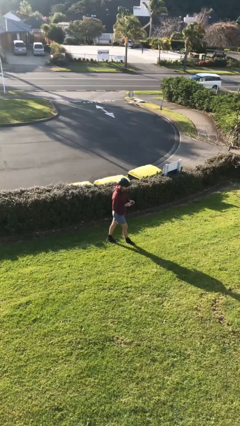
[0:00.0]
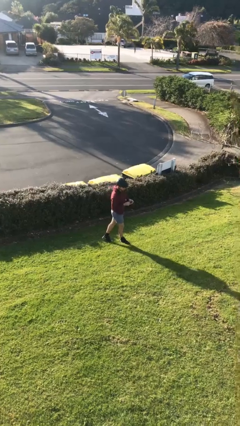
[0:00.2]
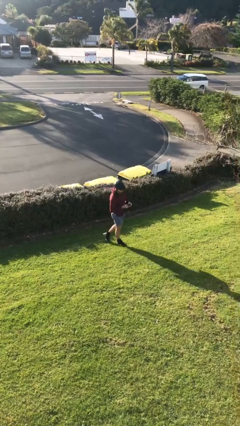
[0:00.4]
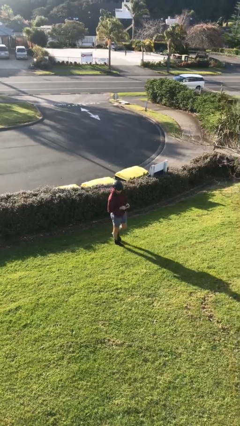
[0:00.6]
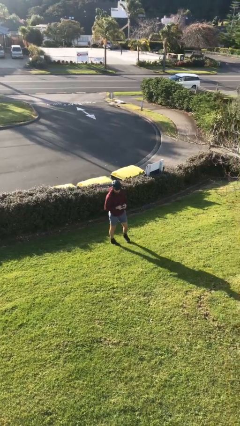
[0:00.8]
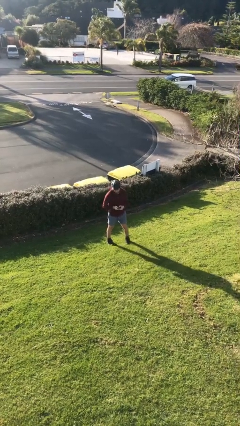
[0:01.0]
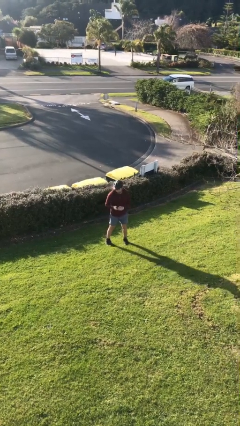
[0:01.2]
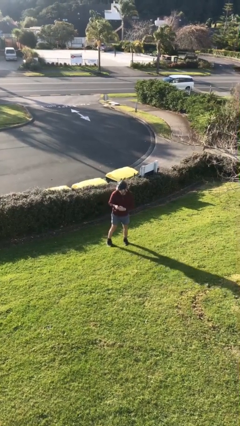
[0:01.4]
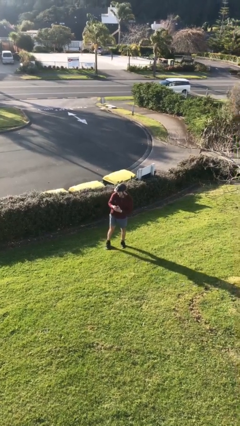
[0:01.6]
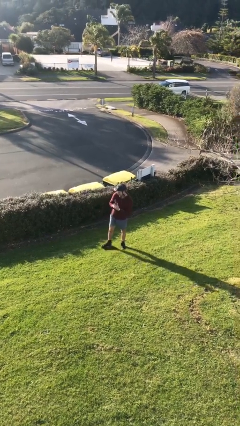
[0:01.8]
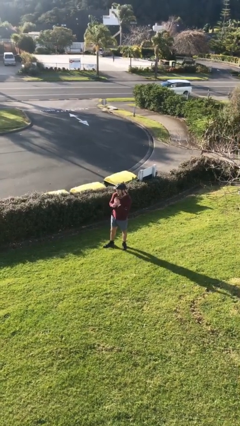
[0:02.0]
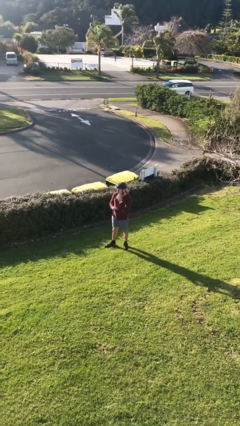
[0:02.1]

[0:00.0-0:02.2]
person texts on phone

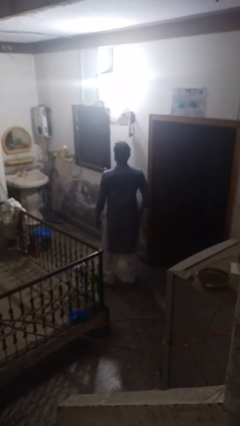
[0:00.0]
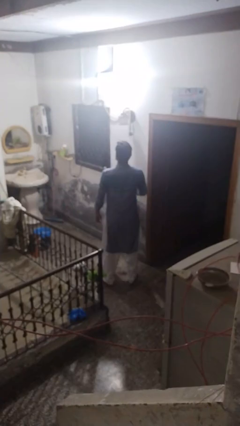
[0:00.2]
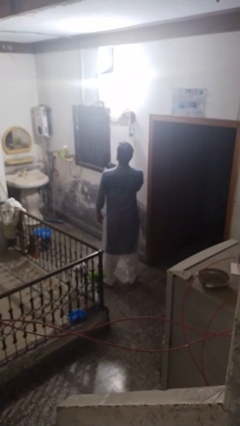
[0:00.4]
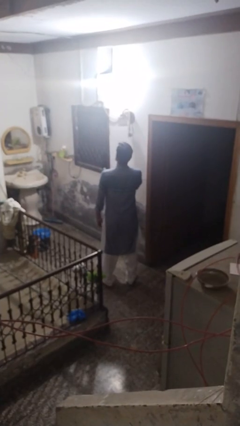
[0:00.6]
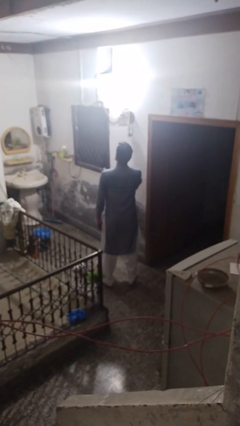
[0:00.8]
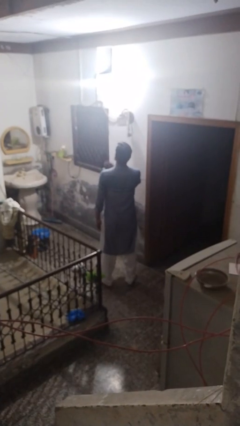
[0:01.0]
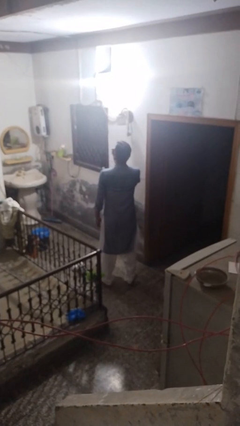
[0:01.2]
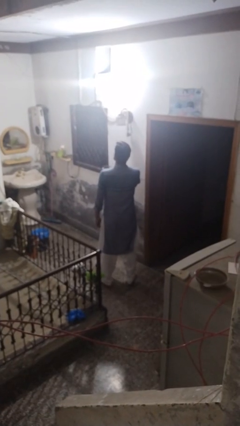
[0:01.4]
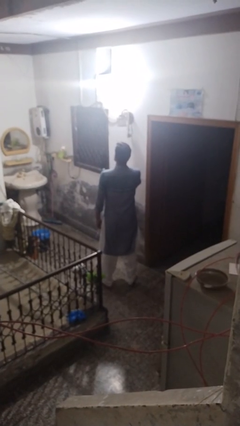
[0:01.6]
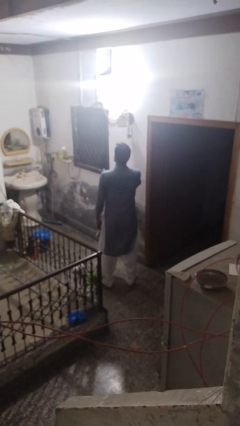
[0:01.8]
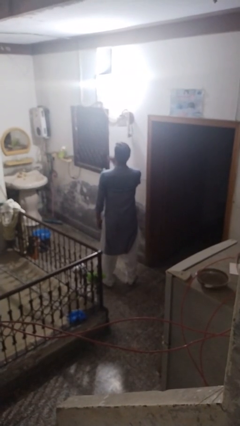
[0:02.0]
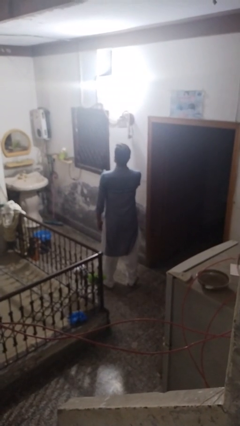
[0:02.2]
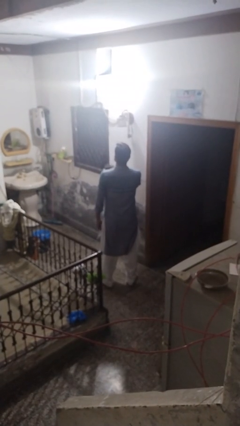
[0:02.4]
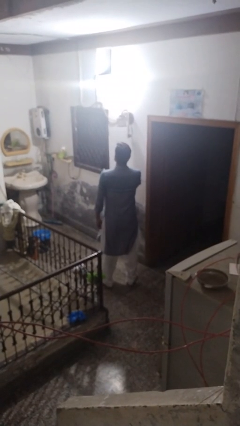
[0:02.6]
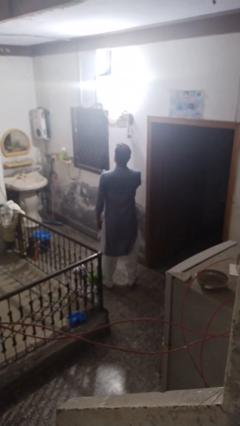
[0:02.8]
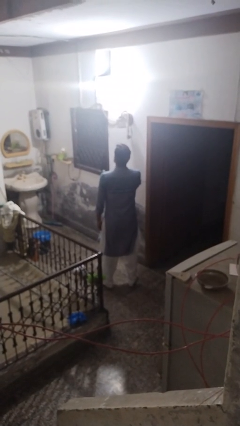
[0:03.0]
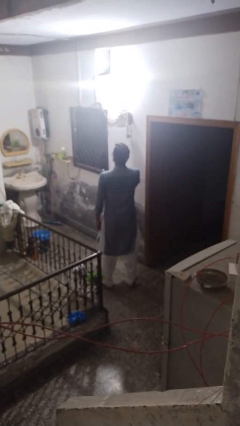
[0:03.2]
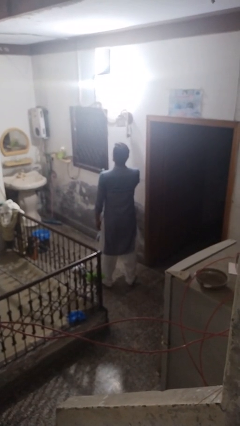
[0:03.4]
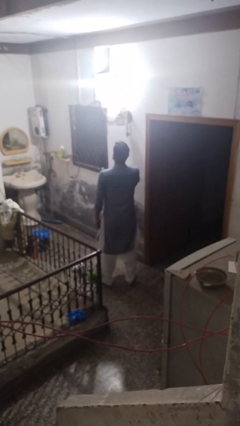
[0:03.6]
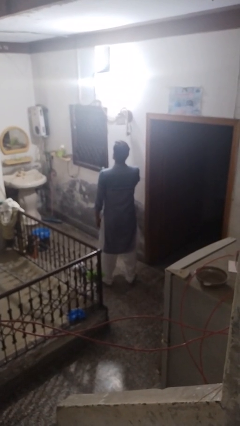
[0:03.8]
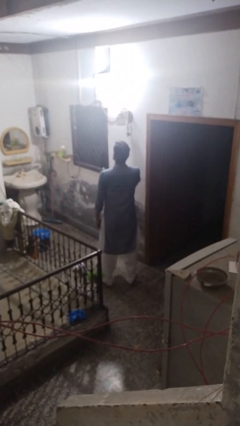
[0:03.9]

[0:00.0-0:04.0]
person drums on chest

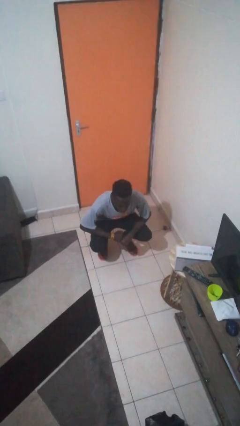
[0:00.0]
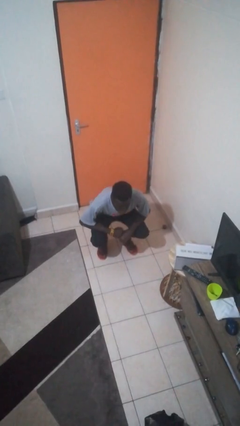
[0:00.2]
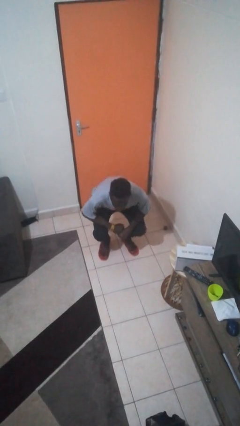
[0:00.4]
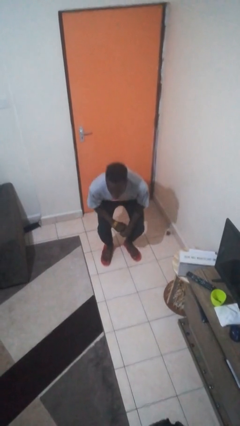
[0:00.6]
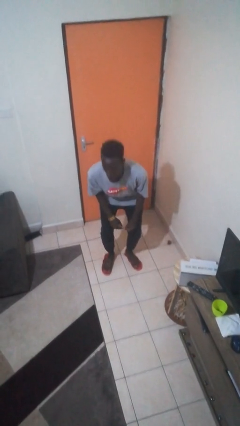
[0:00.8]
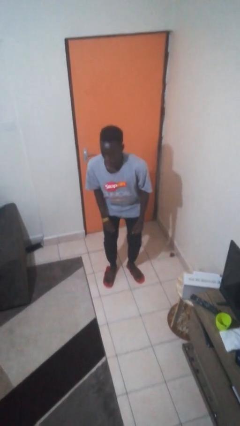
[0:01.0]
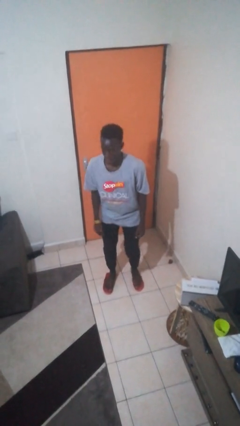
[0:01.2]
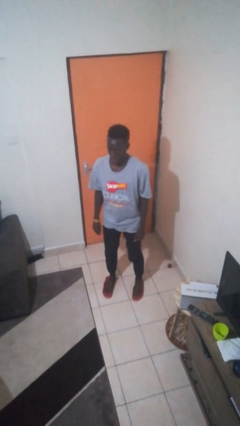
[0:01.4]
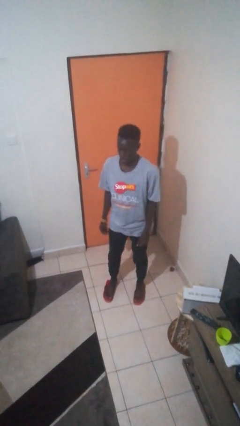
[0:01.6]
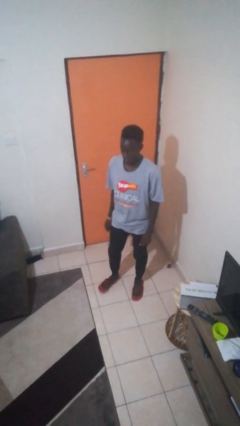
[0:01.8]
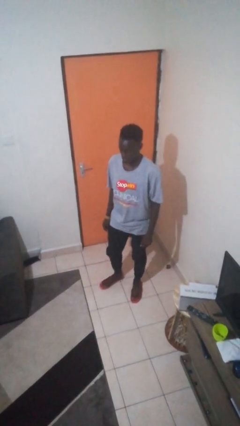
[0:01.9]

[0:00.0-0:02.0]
person stands up

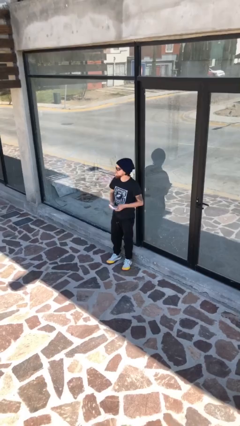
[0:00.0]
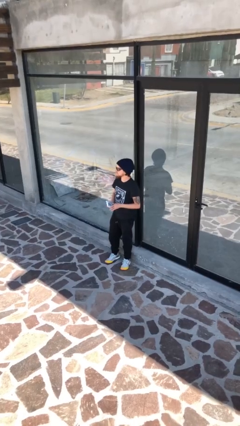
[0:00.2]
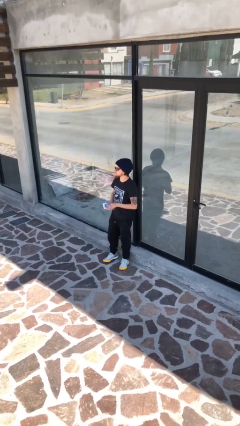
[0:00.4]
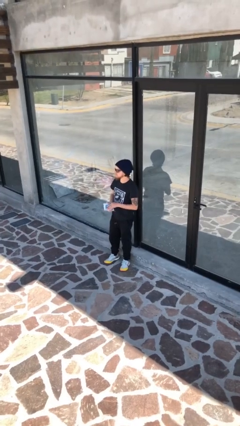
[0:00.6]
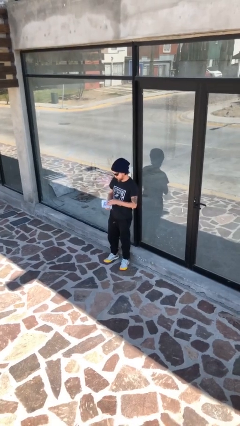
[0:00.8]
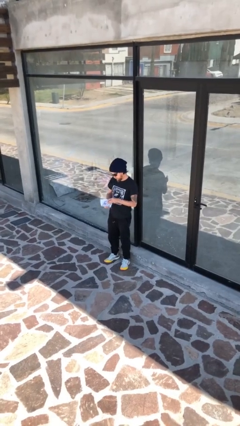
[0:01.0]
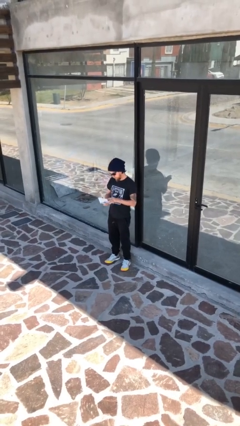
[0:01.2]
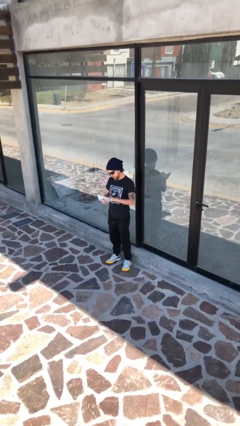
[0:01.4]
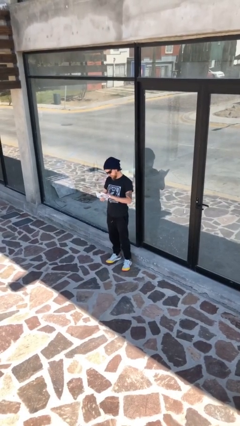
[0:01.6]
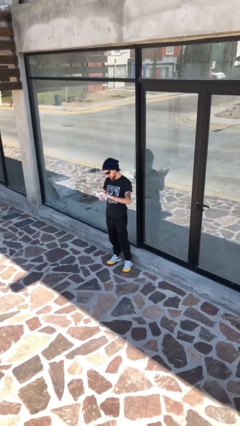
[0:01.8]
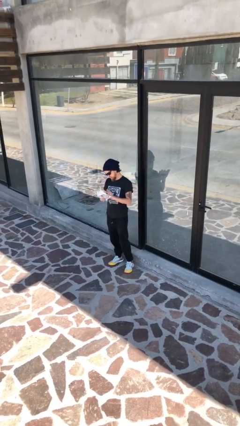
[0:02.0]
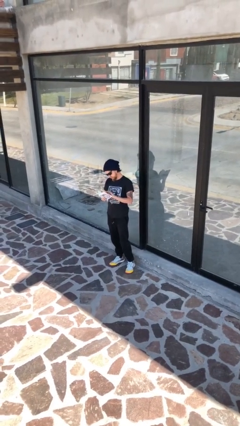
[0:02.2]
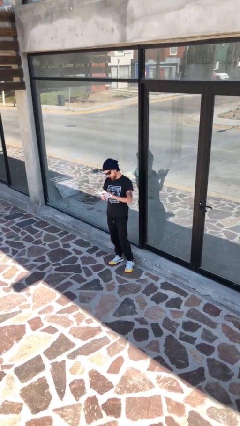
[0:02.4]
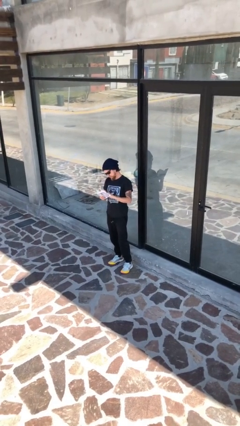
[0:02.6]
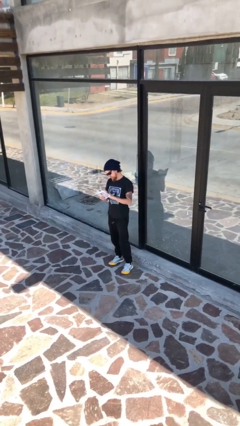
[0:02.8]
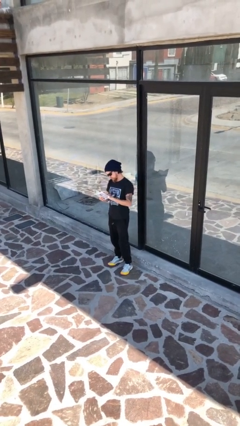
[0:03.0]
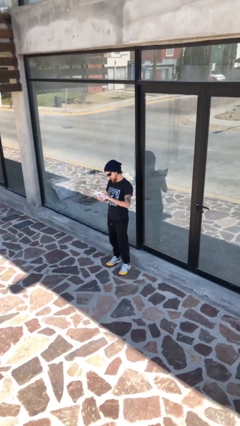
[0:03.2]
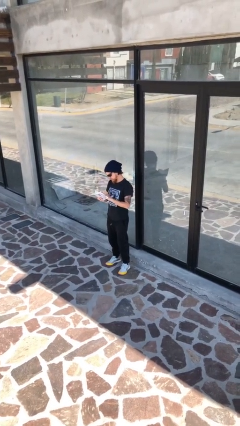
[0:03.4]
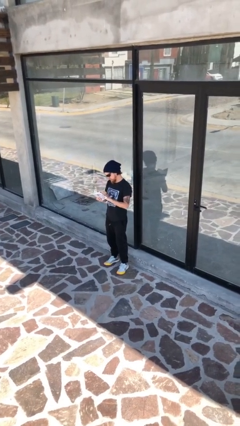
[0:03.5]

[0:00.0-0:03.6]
person reads document

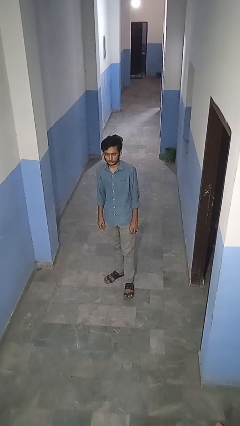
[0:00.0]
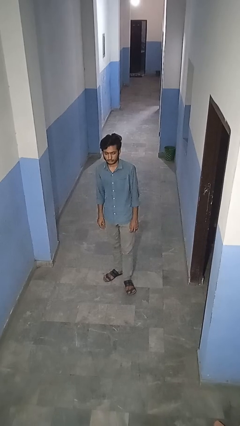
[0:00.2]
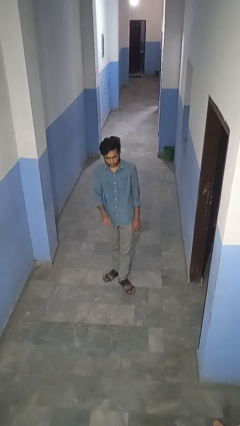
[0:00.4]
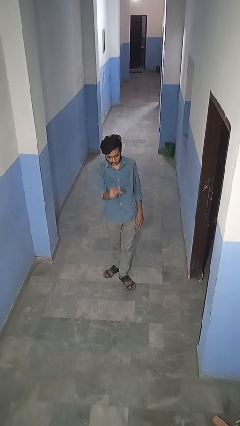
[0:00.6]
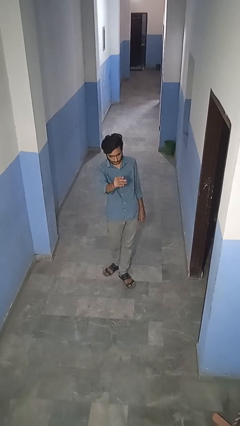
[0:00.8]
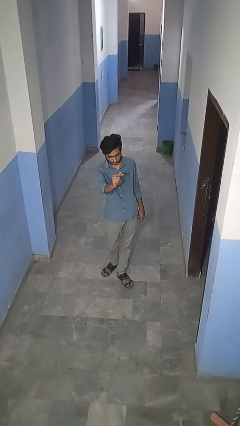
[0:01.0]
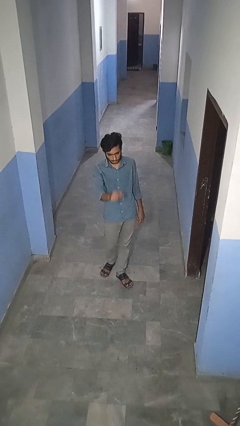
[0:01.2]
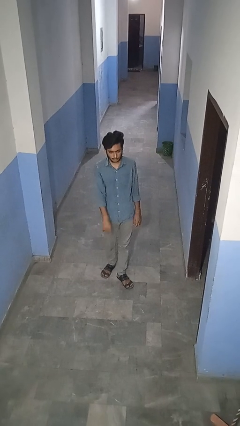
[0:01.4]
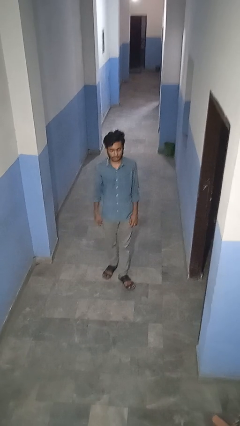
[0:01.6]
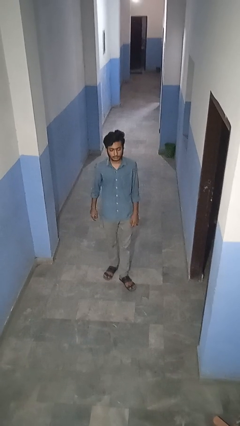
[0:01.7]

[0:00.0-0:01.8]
person snaps fingers

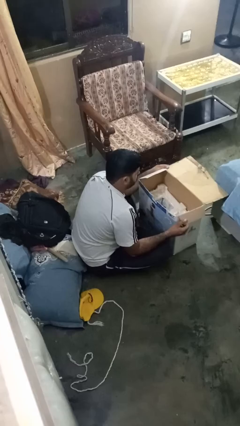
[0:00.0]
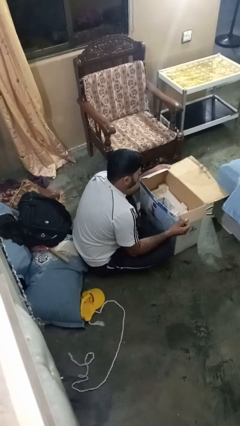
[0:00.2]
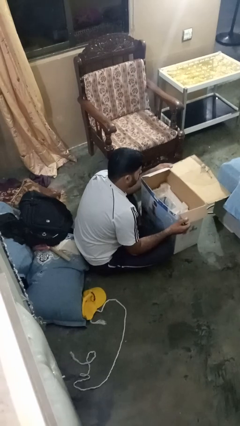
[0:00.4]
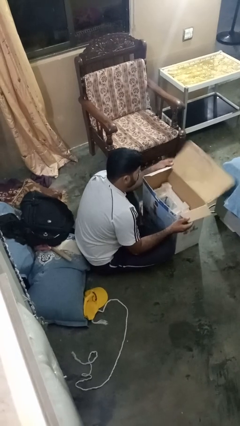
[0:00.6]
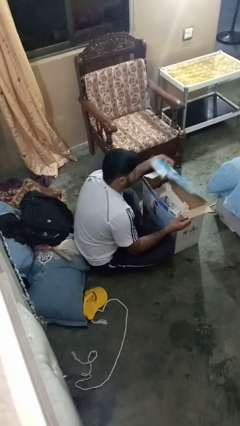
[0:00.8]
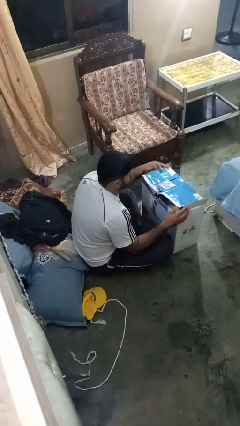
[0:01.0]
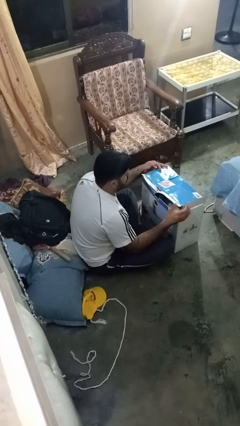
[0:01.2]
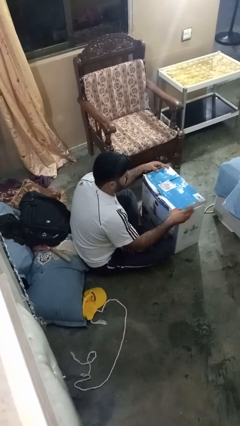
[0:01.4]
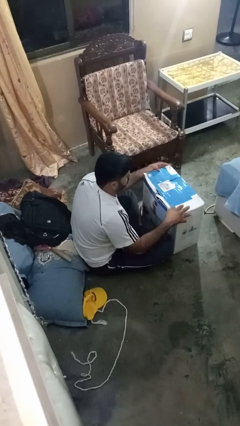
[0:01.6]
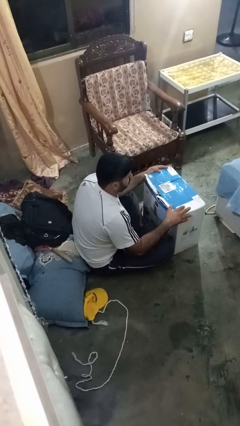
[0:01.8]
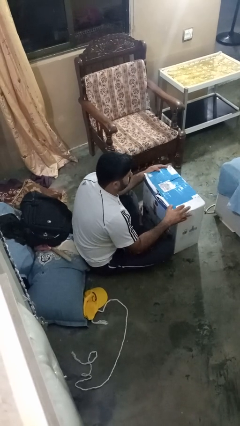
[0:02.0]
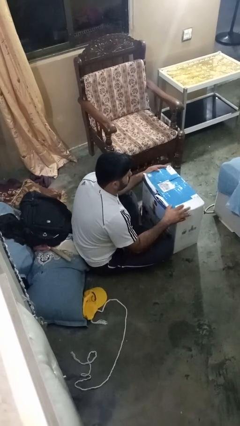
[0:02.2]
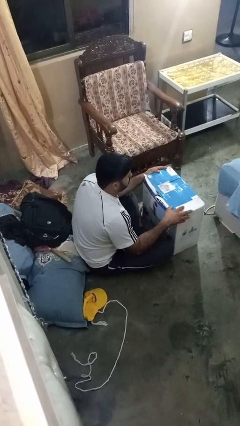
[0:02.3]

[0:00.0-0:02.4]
person closes box

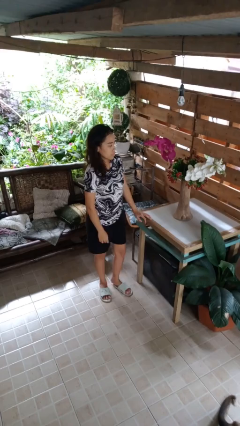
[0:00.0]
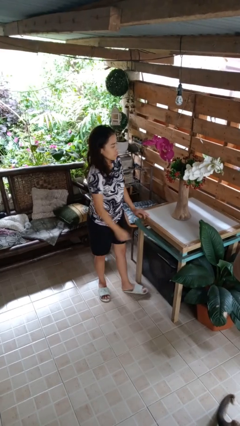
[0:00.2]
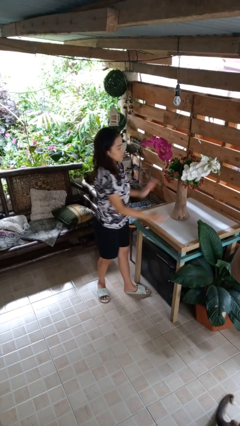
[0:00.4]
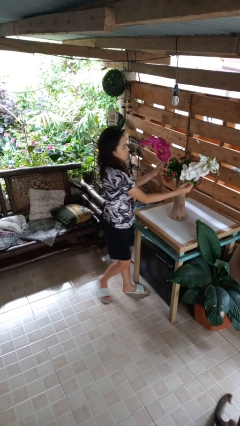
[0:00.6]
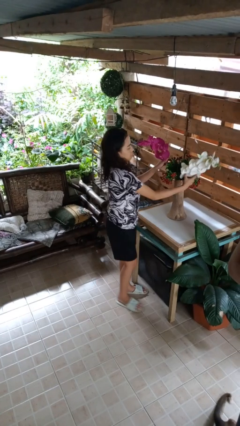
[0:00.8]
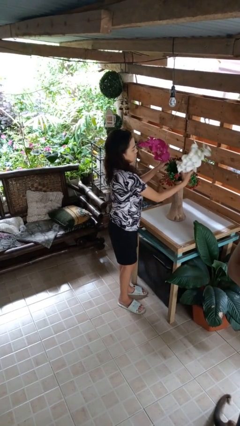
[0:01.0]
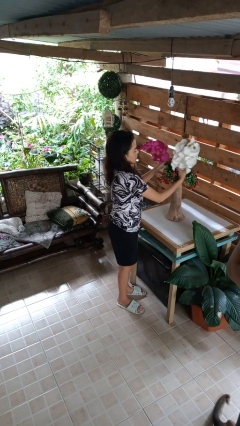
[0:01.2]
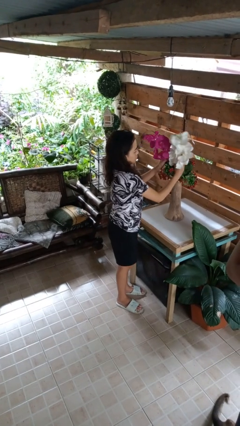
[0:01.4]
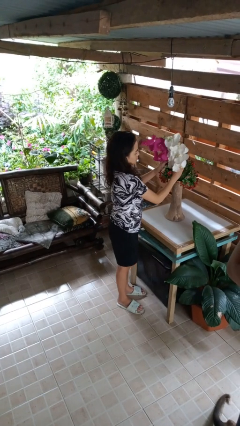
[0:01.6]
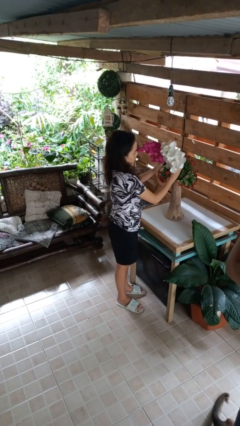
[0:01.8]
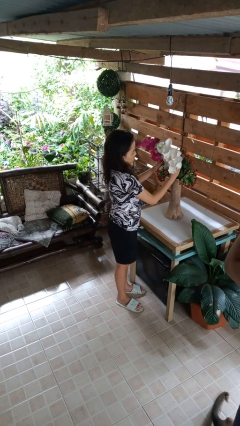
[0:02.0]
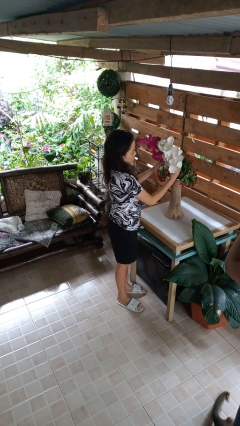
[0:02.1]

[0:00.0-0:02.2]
person arranges flowers in vase
